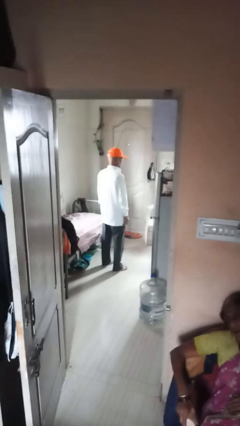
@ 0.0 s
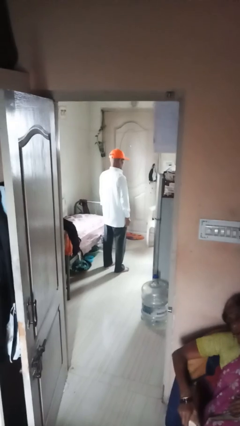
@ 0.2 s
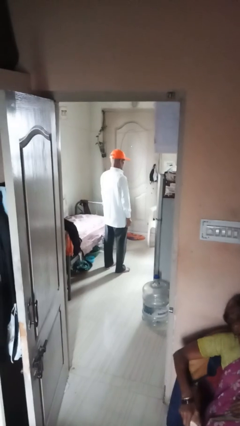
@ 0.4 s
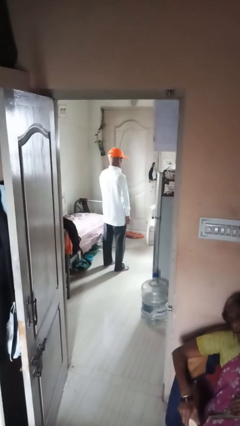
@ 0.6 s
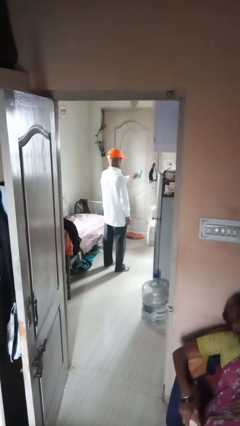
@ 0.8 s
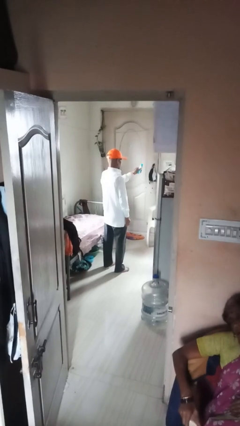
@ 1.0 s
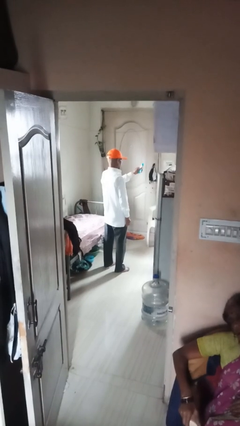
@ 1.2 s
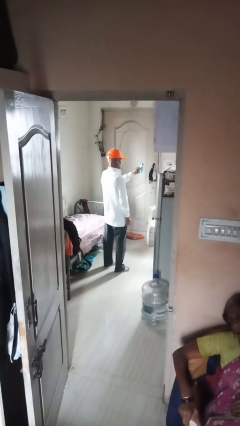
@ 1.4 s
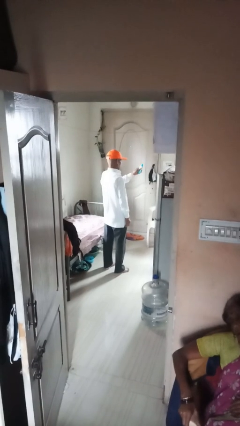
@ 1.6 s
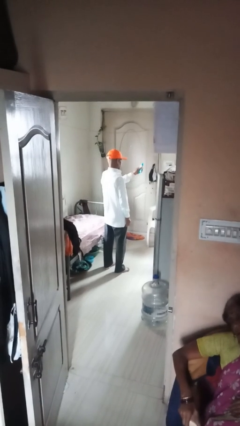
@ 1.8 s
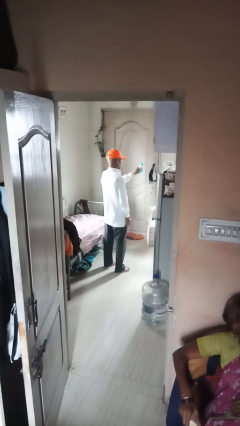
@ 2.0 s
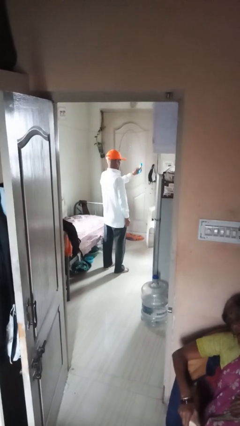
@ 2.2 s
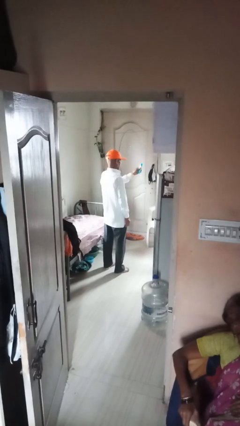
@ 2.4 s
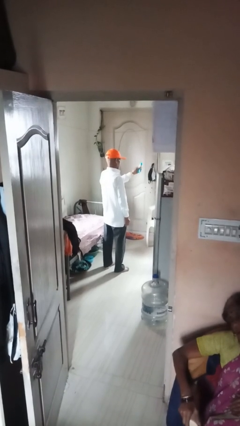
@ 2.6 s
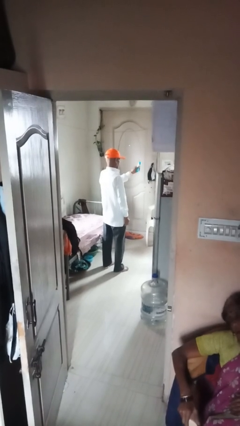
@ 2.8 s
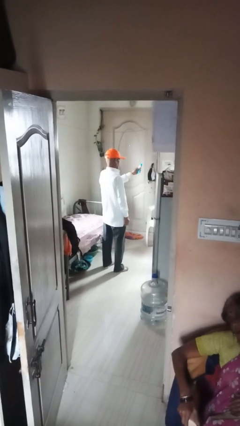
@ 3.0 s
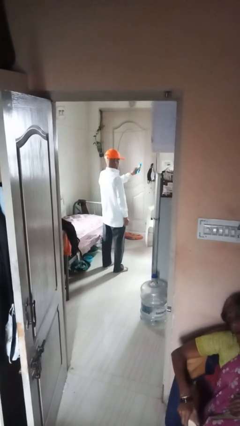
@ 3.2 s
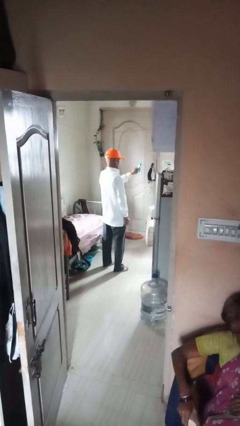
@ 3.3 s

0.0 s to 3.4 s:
person squeezes object

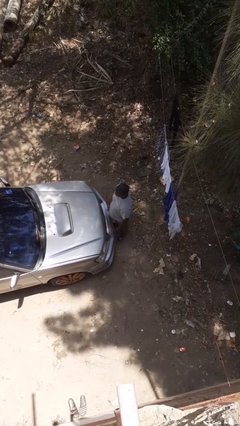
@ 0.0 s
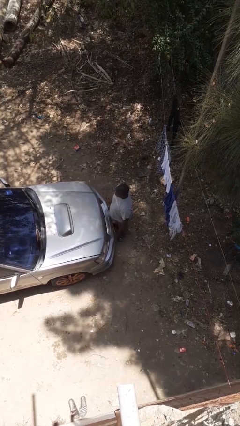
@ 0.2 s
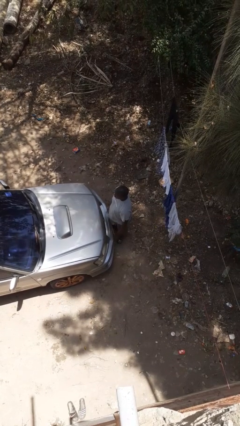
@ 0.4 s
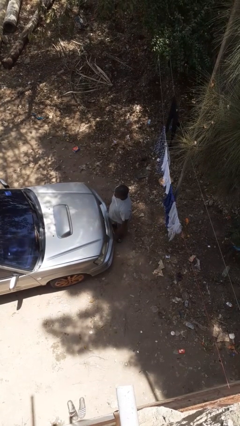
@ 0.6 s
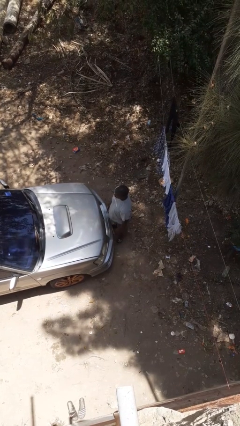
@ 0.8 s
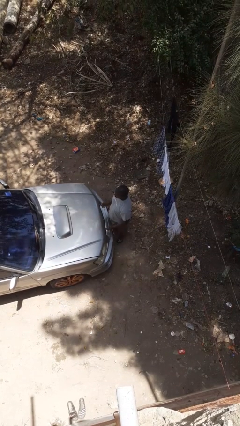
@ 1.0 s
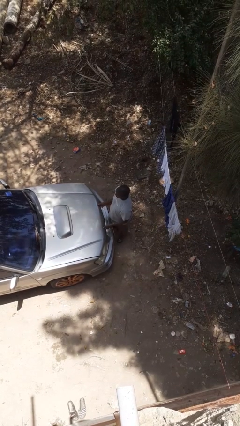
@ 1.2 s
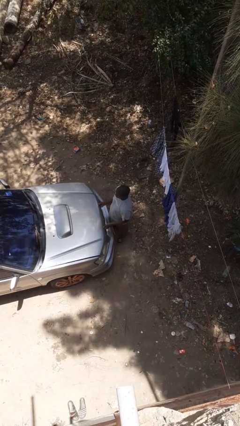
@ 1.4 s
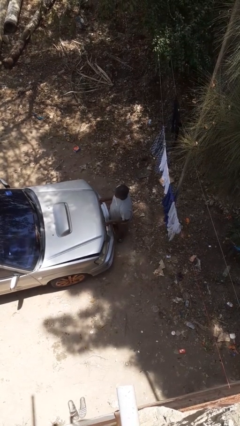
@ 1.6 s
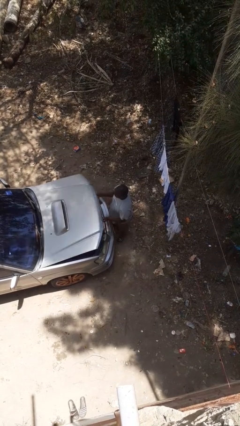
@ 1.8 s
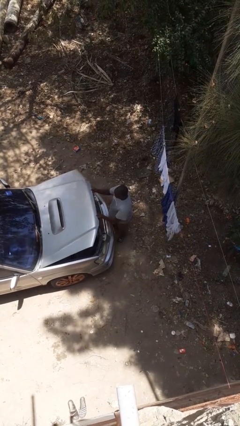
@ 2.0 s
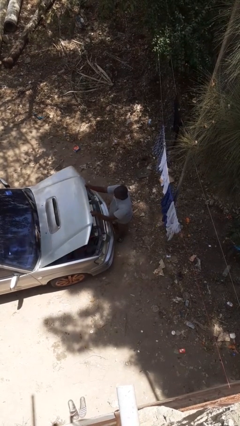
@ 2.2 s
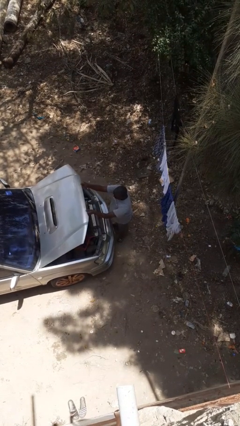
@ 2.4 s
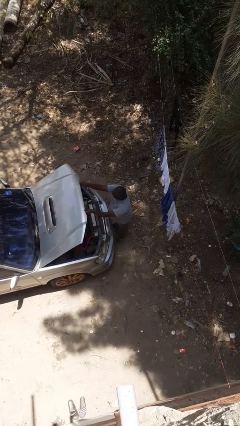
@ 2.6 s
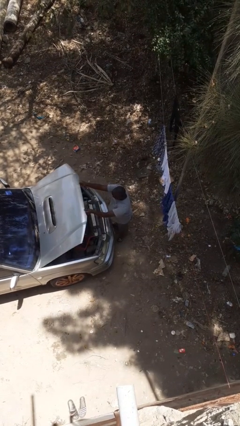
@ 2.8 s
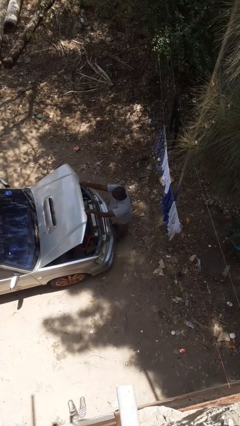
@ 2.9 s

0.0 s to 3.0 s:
person opens car hood

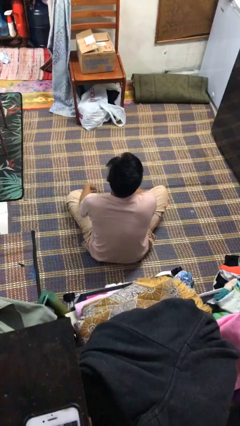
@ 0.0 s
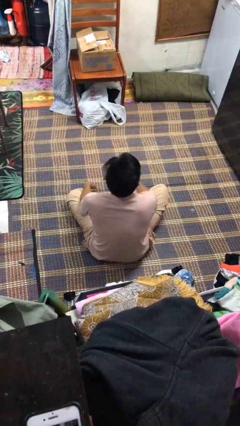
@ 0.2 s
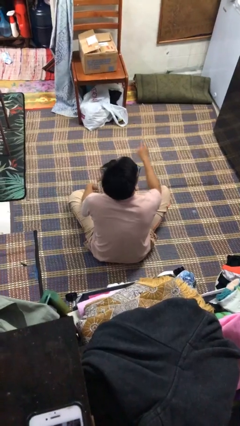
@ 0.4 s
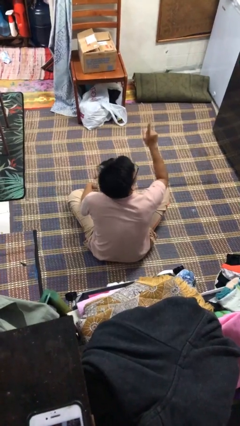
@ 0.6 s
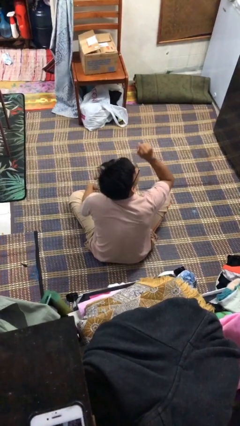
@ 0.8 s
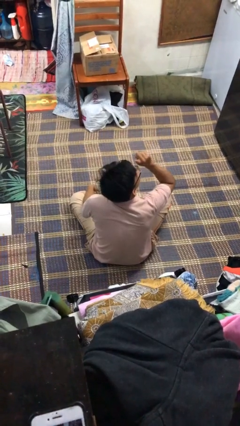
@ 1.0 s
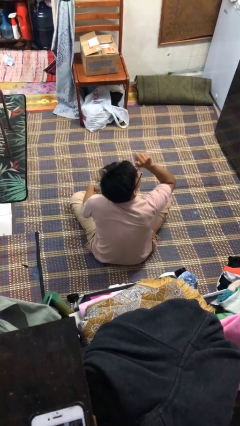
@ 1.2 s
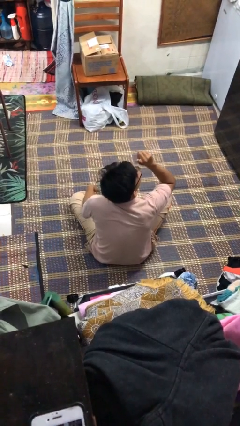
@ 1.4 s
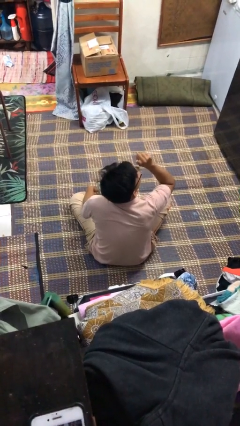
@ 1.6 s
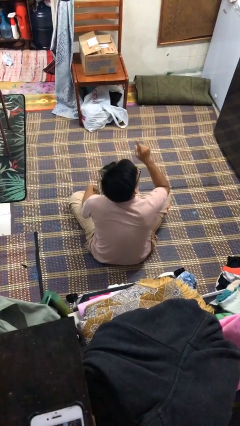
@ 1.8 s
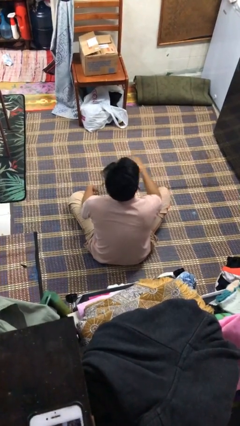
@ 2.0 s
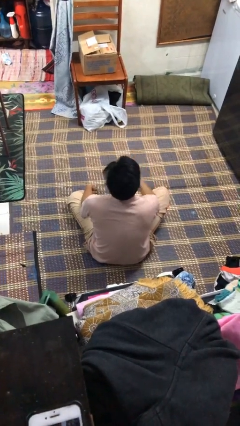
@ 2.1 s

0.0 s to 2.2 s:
person gestures be quiet

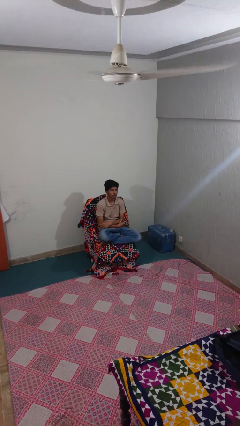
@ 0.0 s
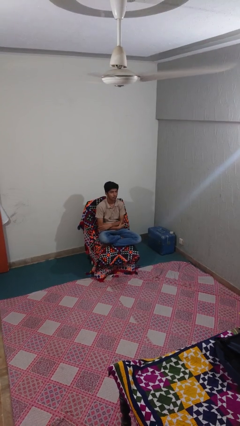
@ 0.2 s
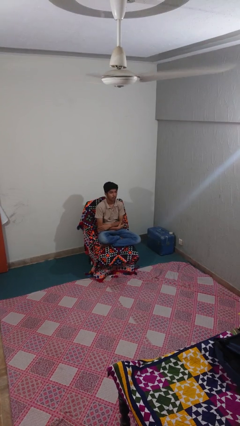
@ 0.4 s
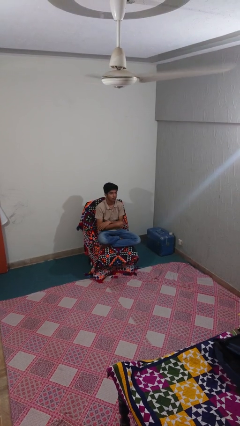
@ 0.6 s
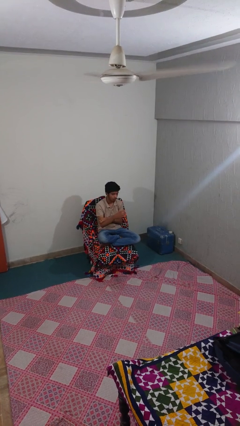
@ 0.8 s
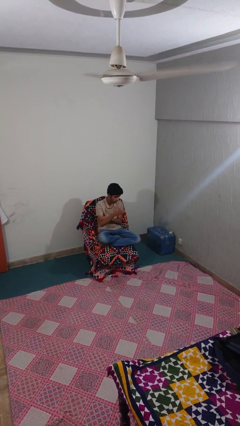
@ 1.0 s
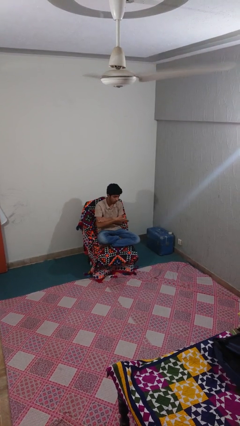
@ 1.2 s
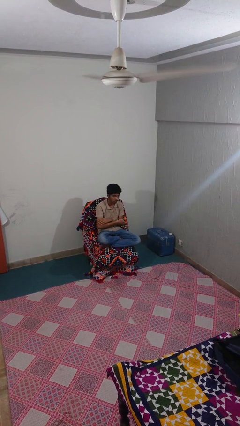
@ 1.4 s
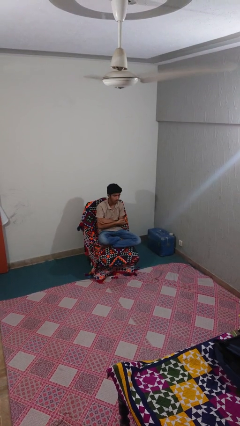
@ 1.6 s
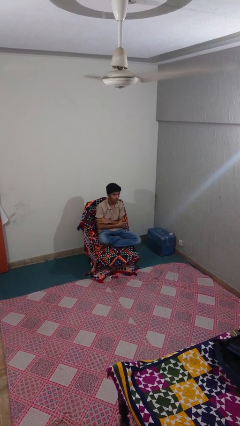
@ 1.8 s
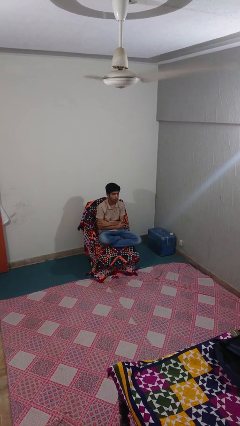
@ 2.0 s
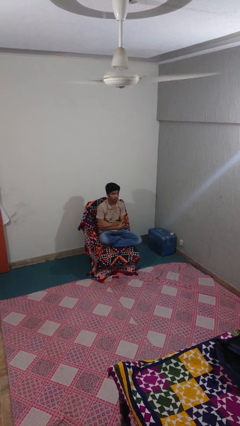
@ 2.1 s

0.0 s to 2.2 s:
person gestures come here

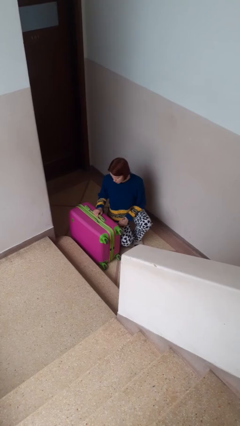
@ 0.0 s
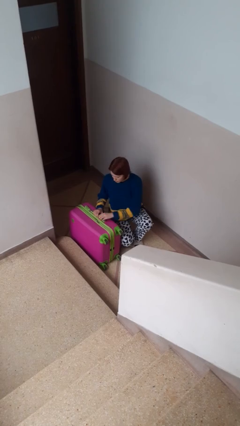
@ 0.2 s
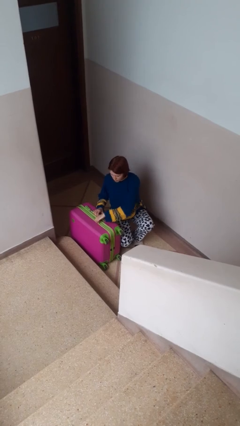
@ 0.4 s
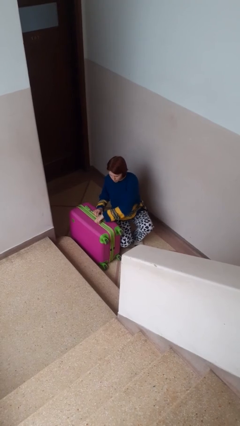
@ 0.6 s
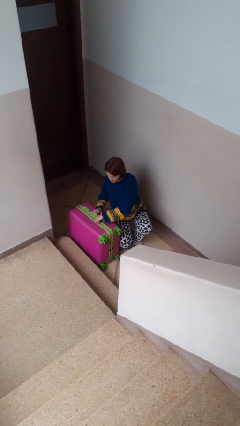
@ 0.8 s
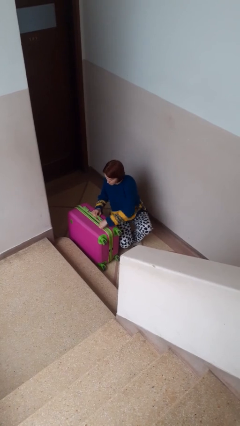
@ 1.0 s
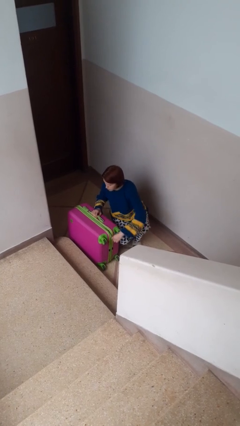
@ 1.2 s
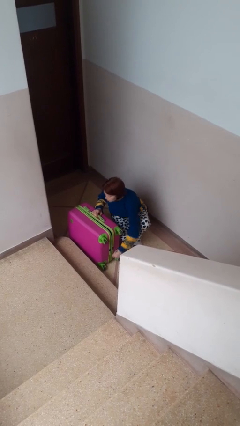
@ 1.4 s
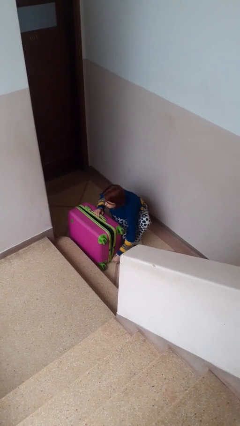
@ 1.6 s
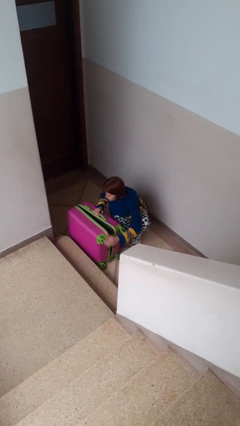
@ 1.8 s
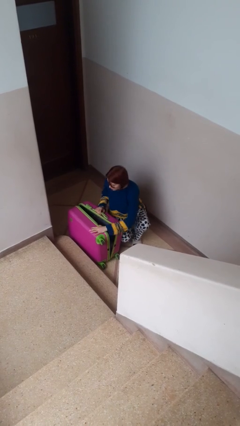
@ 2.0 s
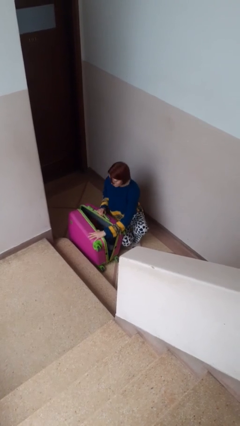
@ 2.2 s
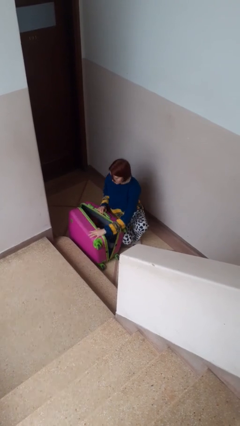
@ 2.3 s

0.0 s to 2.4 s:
person opens suitcase

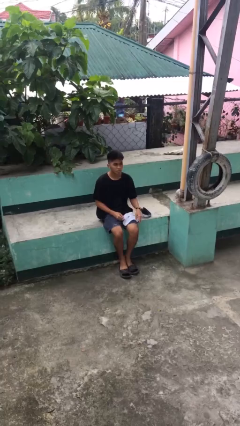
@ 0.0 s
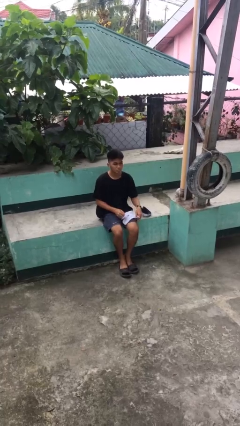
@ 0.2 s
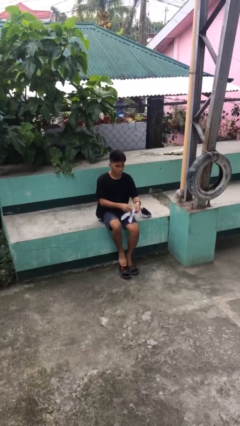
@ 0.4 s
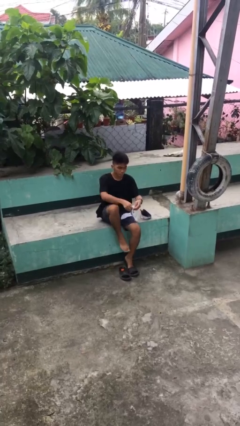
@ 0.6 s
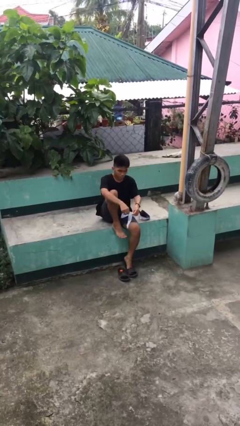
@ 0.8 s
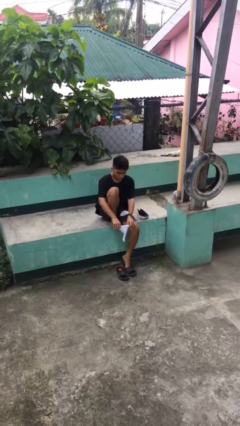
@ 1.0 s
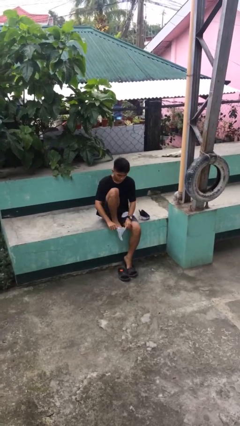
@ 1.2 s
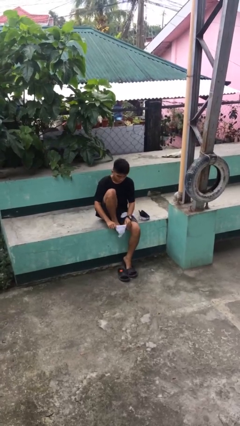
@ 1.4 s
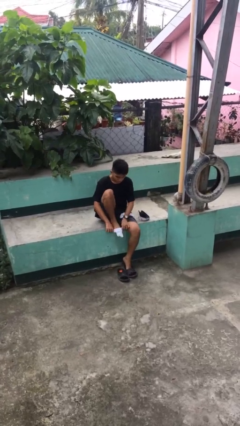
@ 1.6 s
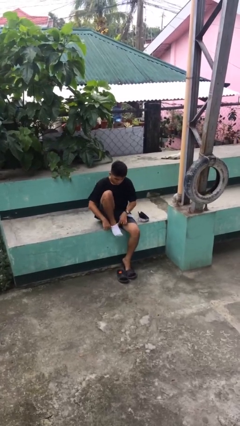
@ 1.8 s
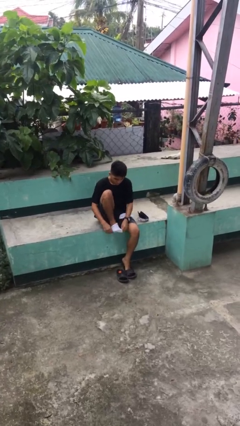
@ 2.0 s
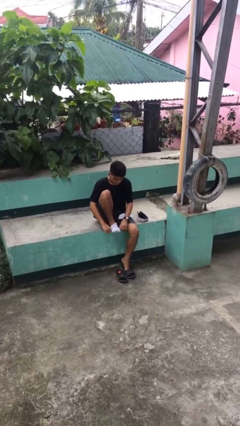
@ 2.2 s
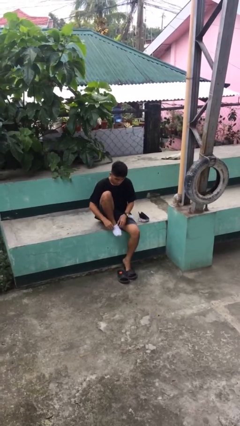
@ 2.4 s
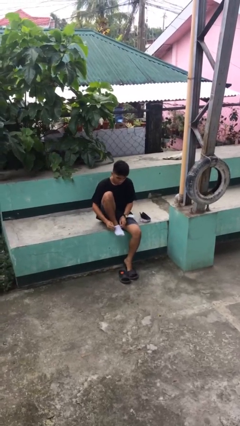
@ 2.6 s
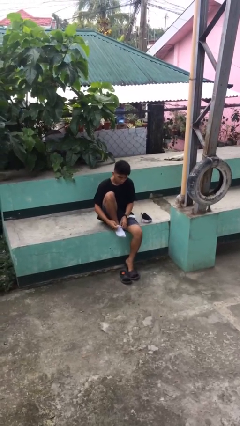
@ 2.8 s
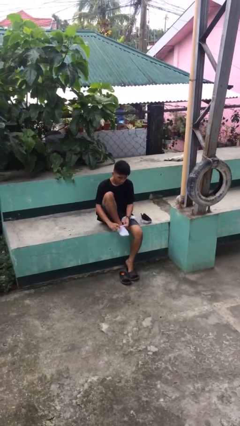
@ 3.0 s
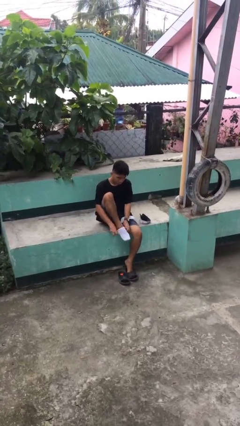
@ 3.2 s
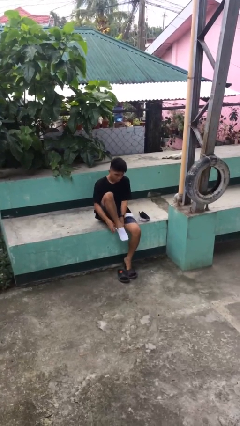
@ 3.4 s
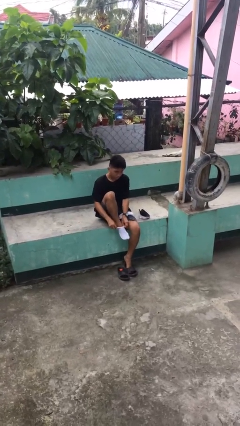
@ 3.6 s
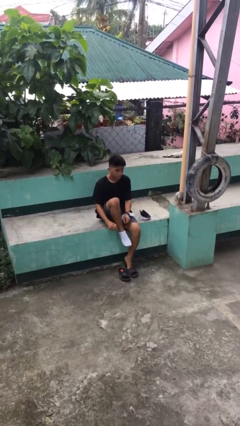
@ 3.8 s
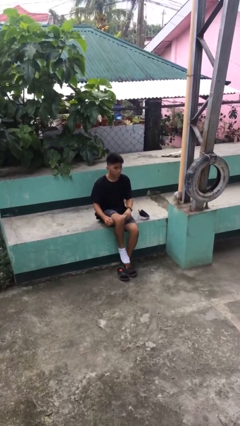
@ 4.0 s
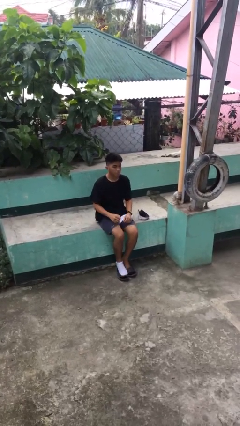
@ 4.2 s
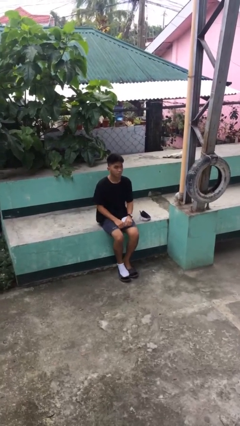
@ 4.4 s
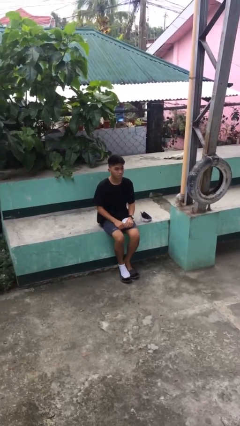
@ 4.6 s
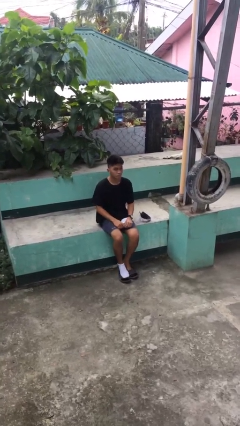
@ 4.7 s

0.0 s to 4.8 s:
person puts on socks
